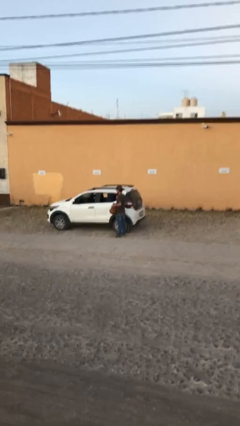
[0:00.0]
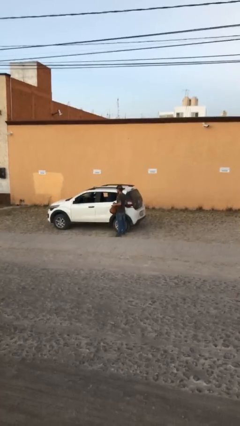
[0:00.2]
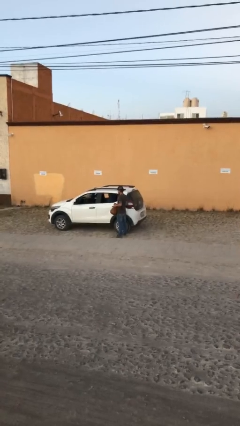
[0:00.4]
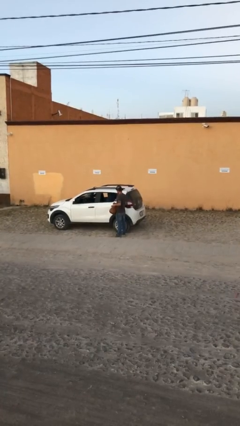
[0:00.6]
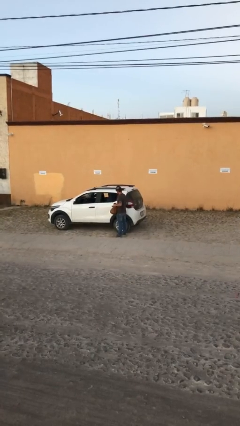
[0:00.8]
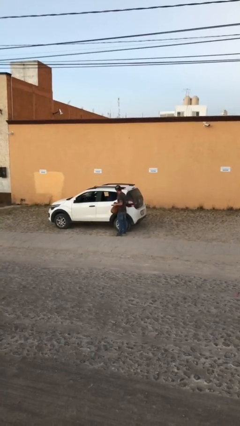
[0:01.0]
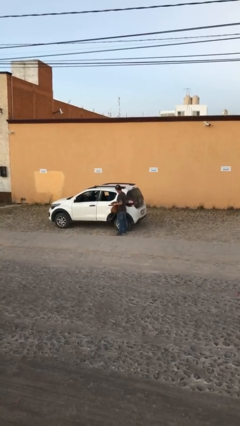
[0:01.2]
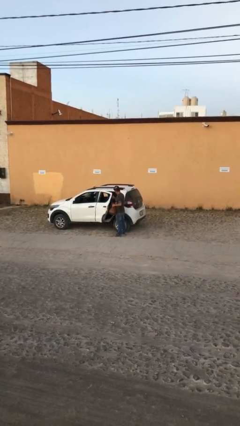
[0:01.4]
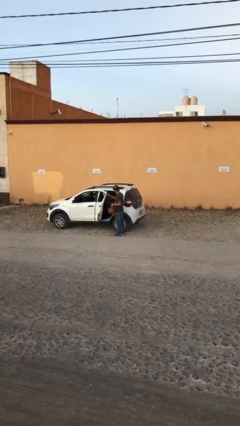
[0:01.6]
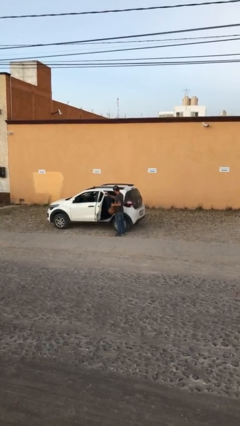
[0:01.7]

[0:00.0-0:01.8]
person opens car door

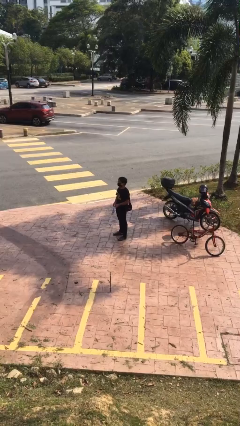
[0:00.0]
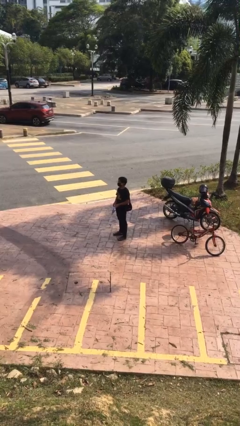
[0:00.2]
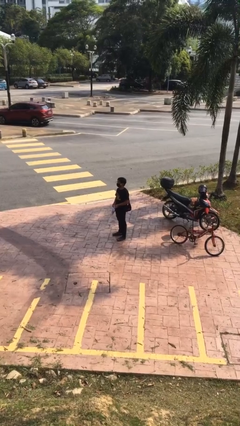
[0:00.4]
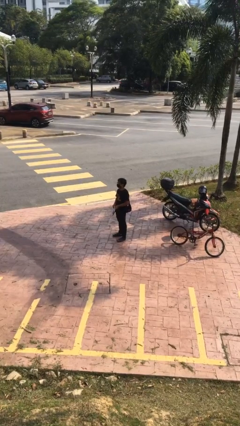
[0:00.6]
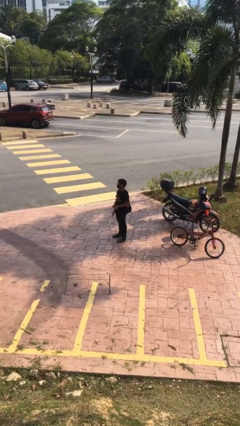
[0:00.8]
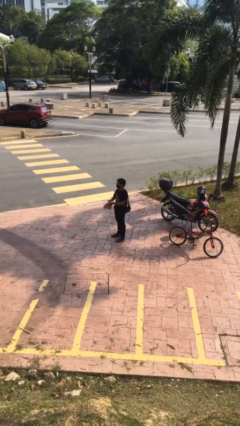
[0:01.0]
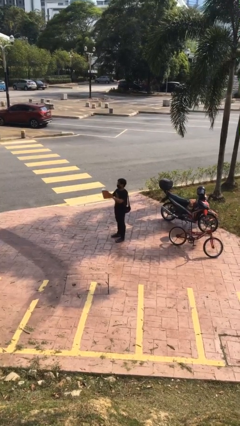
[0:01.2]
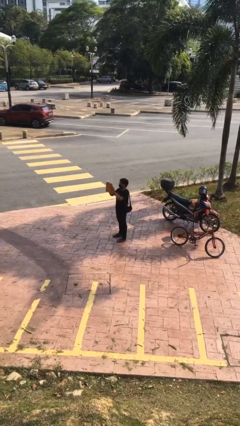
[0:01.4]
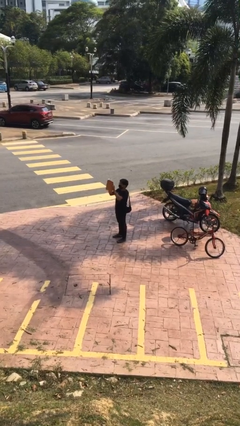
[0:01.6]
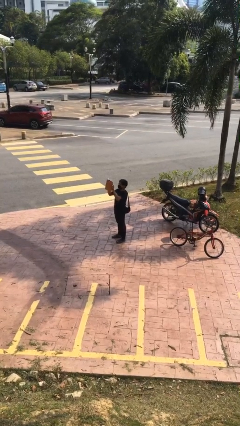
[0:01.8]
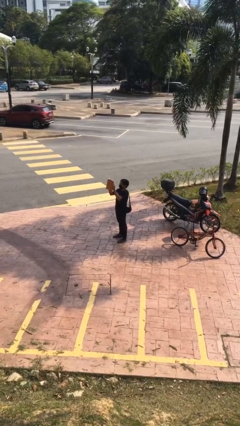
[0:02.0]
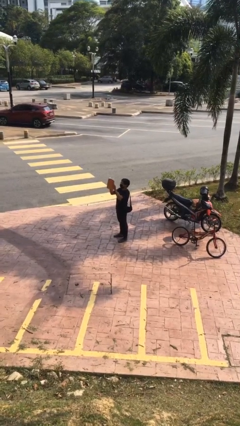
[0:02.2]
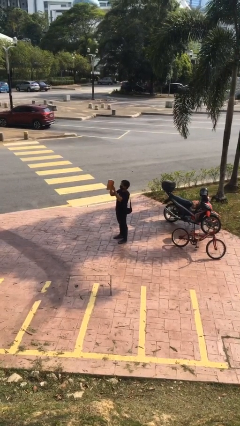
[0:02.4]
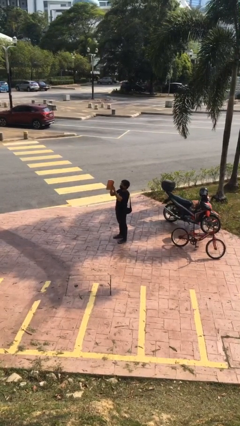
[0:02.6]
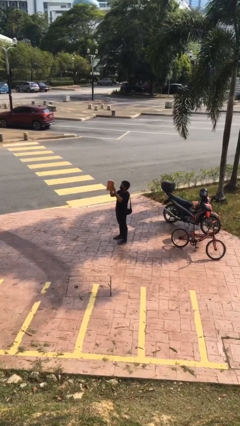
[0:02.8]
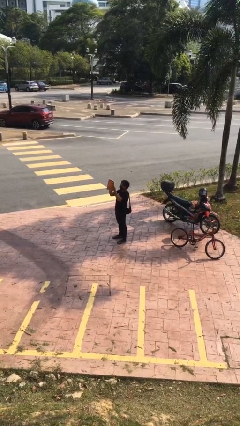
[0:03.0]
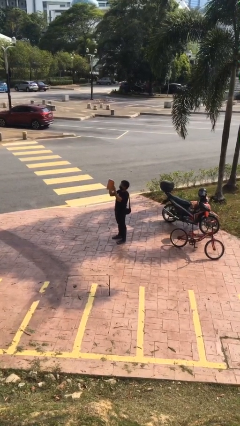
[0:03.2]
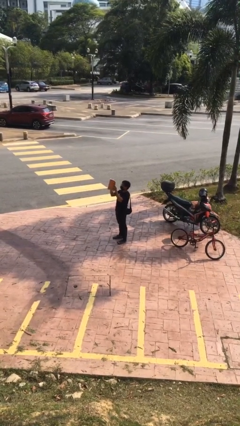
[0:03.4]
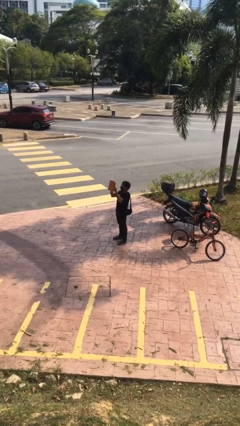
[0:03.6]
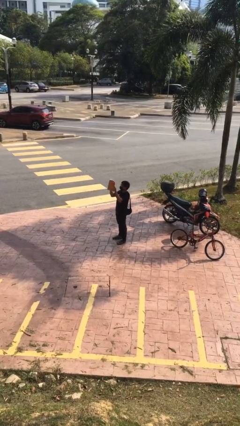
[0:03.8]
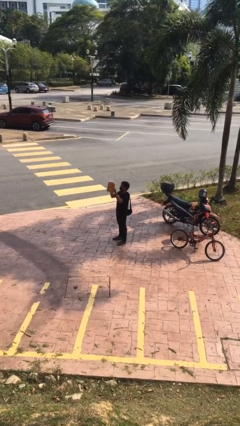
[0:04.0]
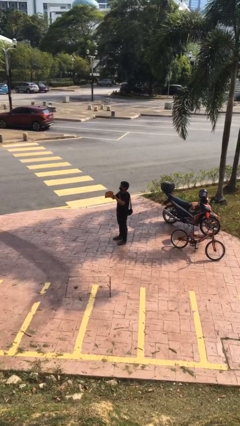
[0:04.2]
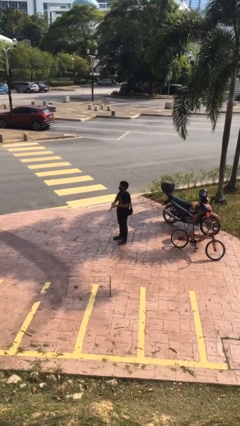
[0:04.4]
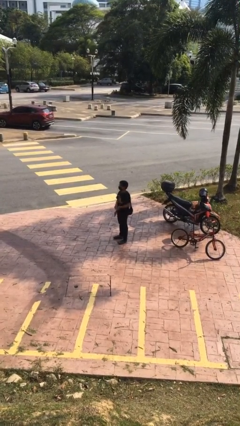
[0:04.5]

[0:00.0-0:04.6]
person reads document

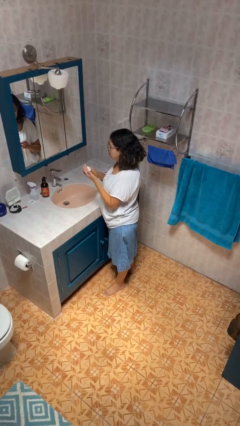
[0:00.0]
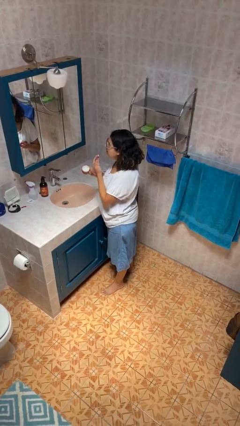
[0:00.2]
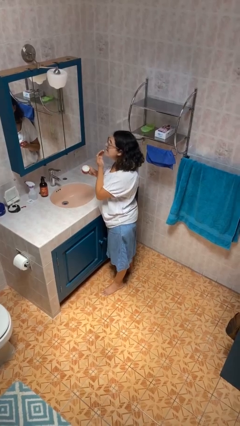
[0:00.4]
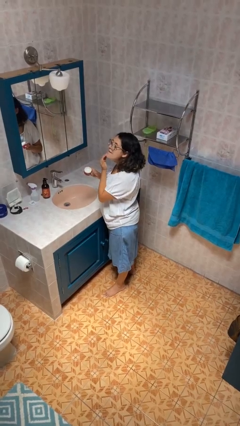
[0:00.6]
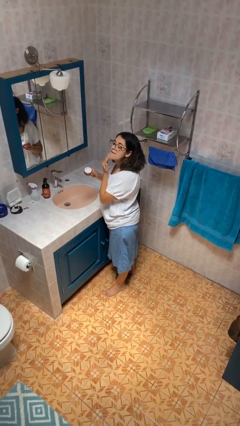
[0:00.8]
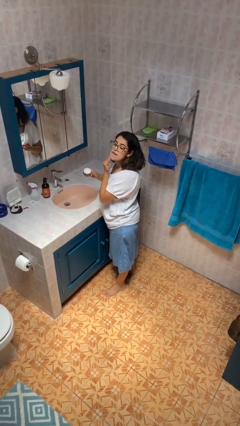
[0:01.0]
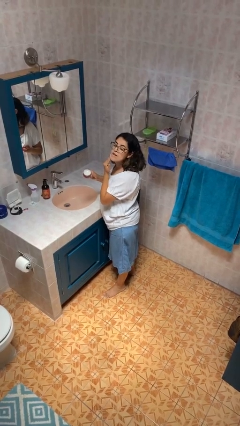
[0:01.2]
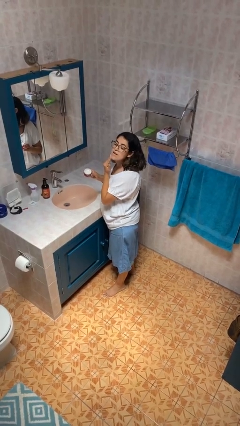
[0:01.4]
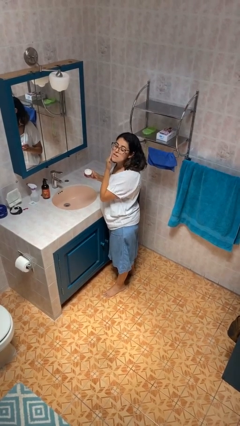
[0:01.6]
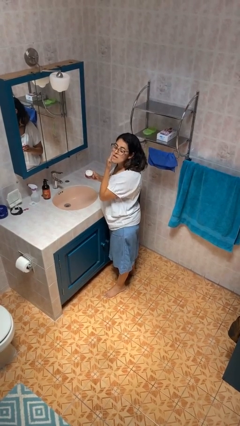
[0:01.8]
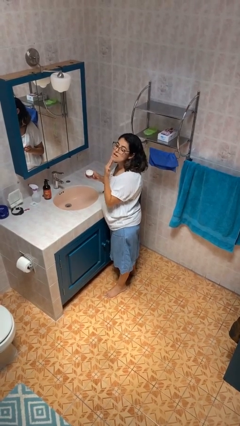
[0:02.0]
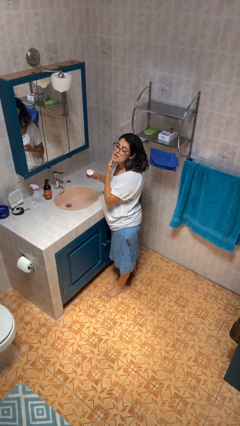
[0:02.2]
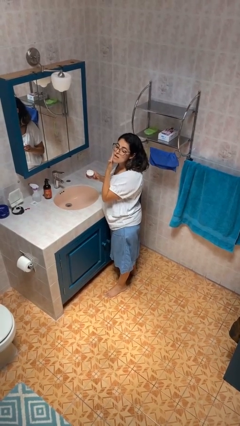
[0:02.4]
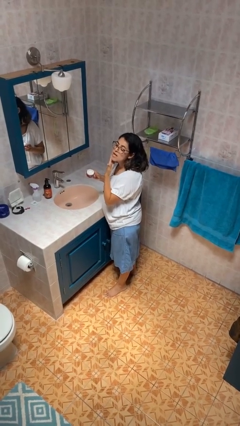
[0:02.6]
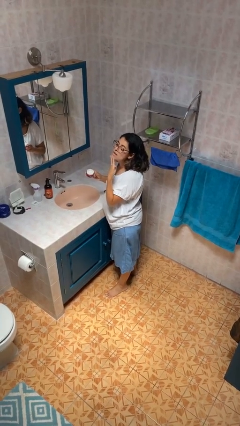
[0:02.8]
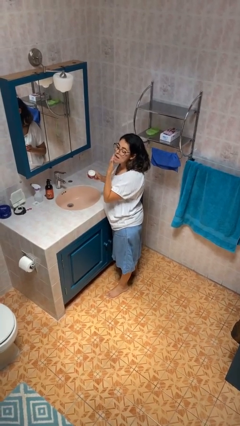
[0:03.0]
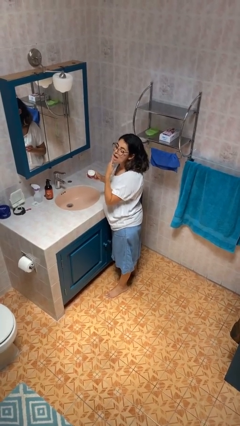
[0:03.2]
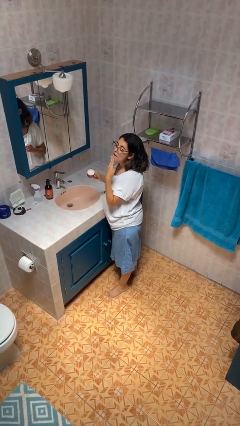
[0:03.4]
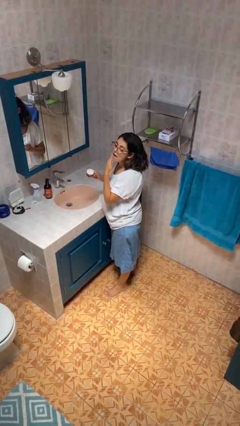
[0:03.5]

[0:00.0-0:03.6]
person applies facial moisturizer

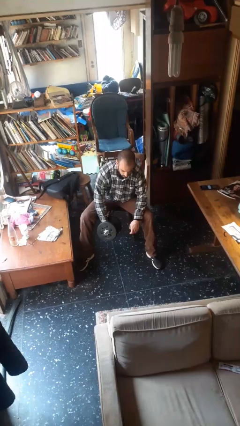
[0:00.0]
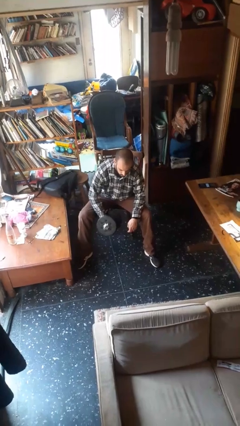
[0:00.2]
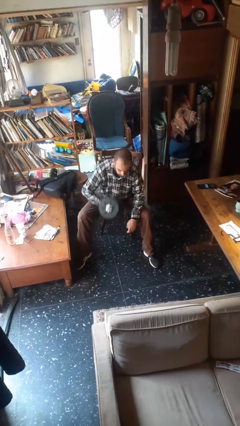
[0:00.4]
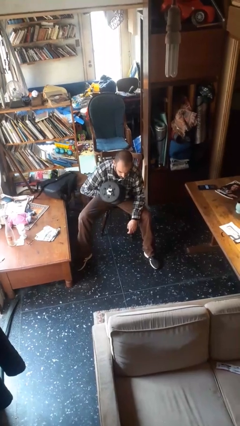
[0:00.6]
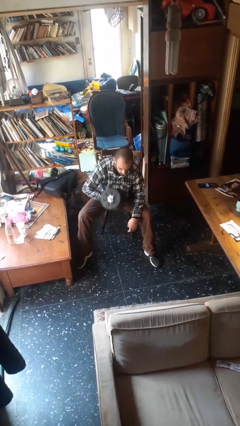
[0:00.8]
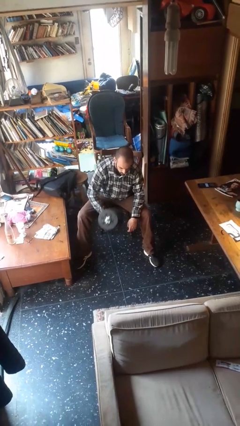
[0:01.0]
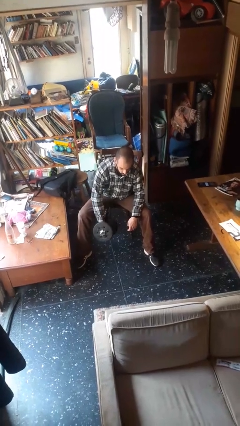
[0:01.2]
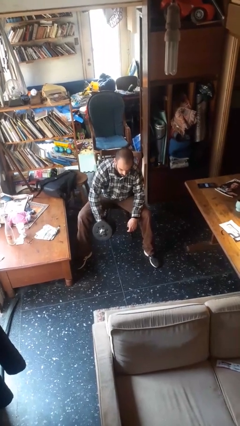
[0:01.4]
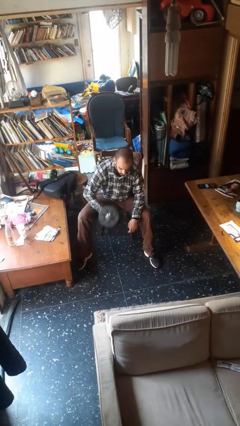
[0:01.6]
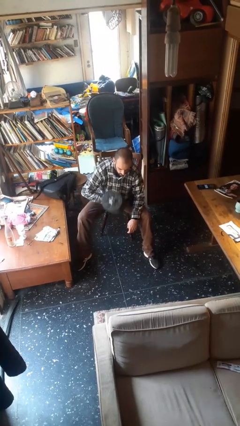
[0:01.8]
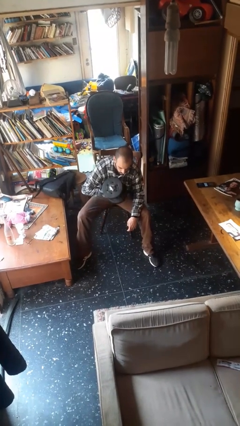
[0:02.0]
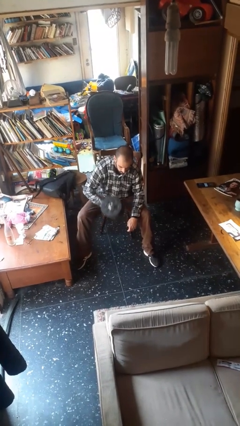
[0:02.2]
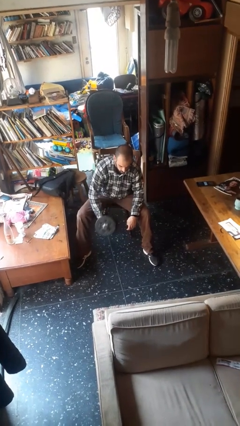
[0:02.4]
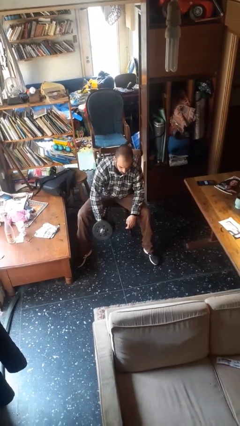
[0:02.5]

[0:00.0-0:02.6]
person lifts dumbbells

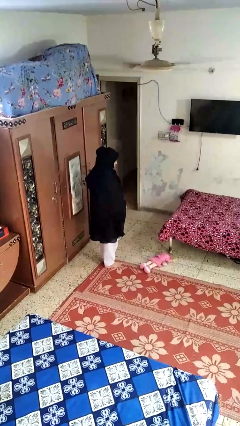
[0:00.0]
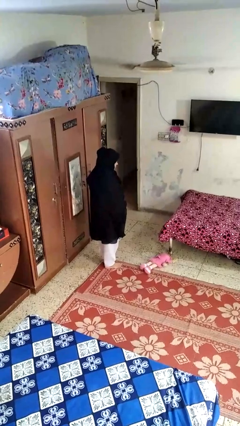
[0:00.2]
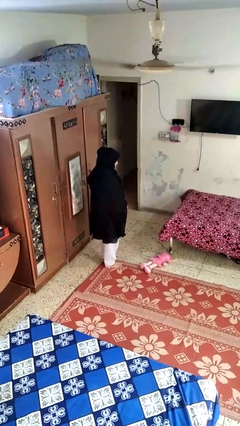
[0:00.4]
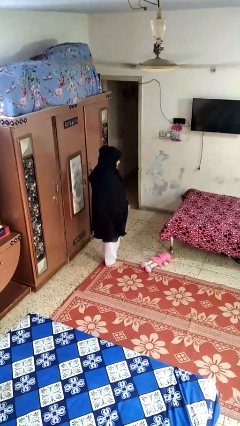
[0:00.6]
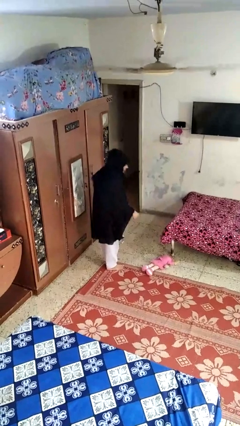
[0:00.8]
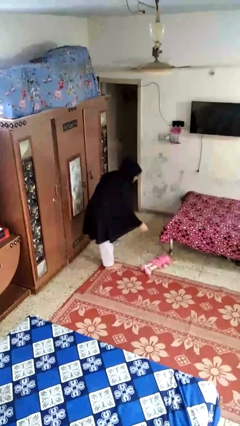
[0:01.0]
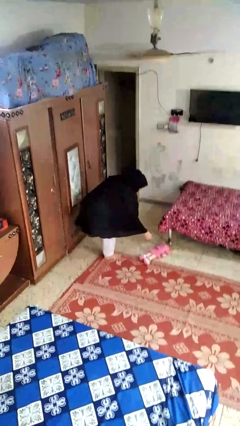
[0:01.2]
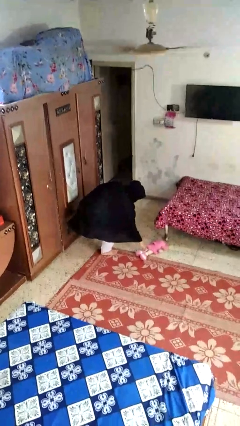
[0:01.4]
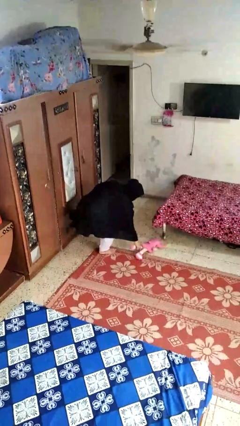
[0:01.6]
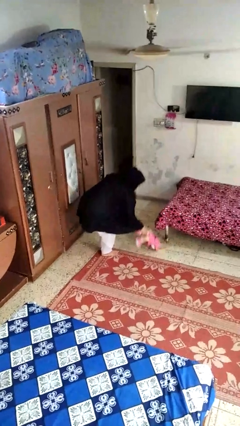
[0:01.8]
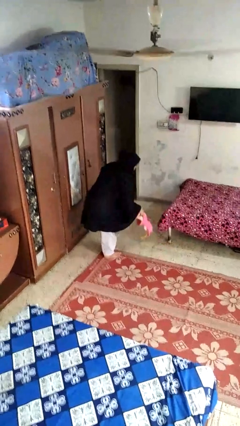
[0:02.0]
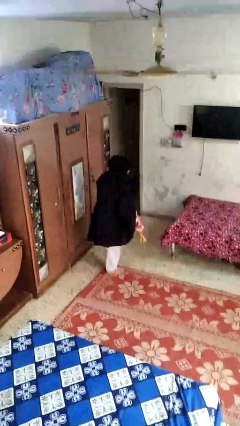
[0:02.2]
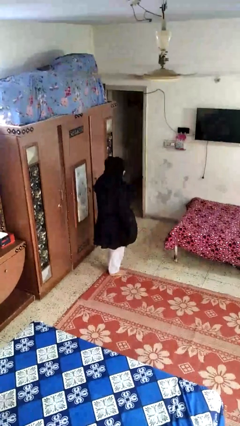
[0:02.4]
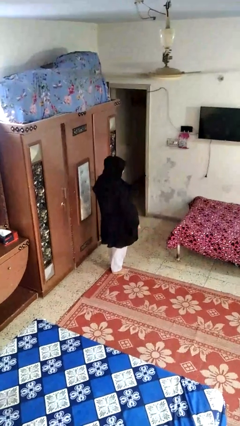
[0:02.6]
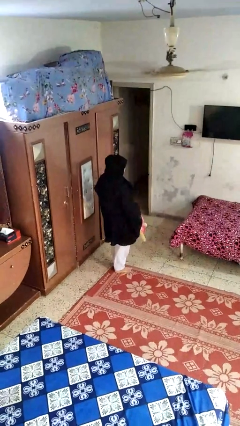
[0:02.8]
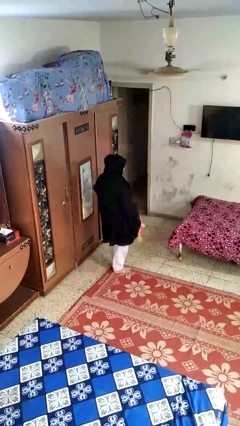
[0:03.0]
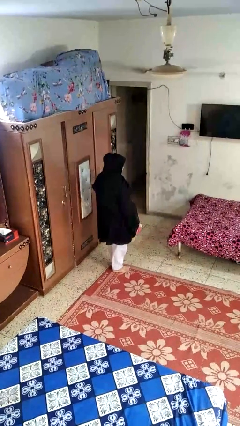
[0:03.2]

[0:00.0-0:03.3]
person picks up object from floor

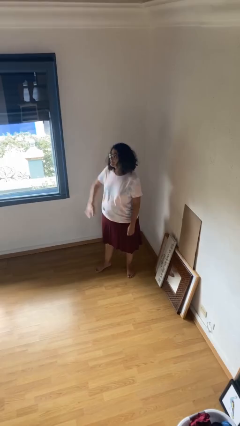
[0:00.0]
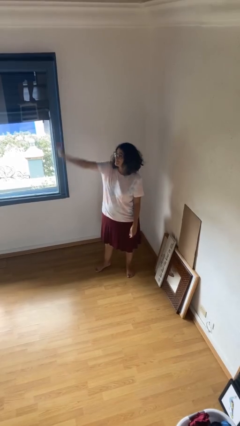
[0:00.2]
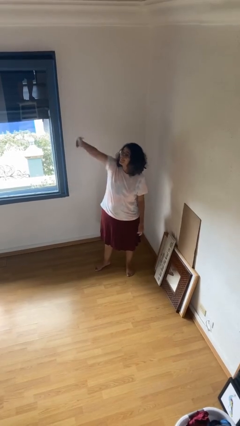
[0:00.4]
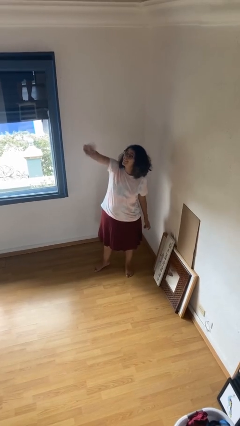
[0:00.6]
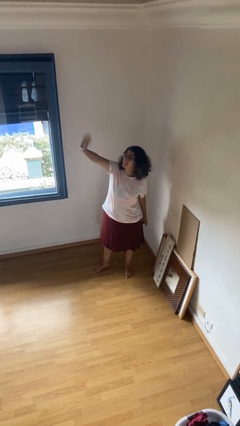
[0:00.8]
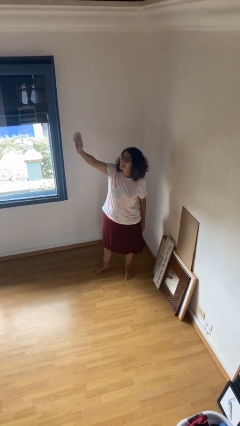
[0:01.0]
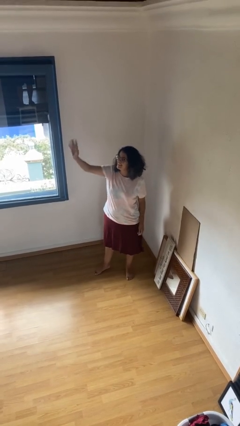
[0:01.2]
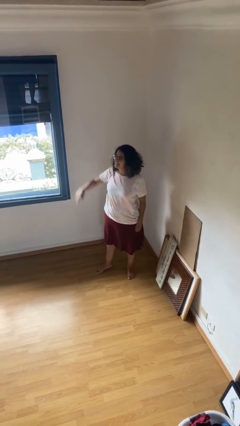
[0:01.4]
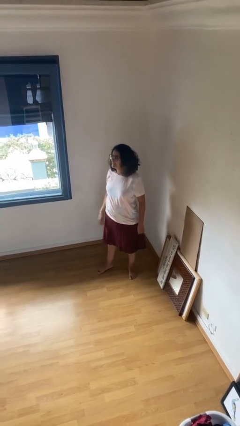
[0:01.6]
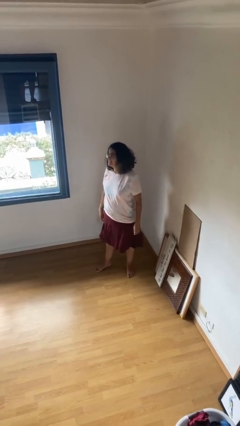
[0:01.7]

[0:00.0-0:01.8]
person waves at person
